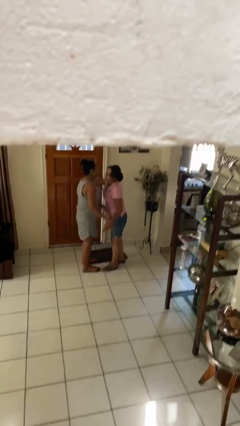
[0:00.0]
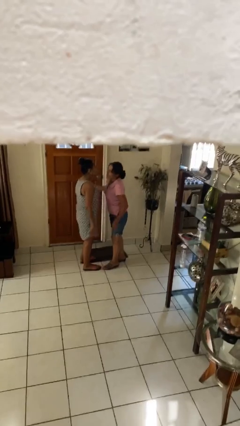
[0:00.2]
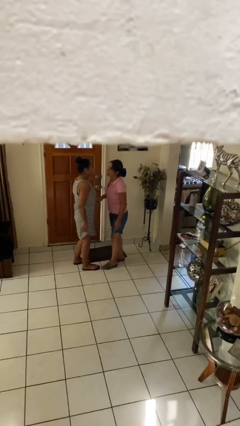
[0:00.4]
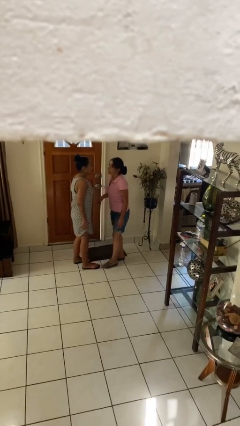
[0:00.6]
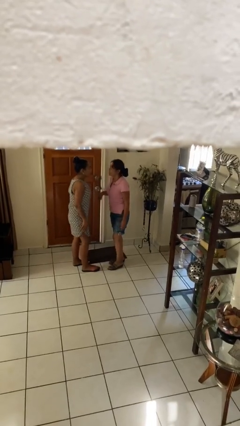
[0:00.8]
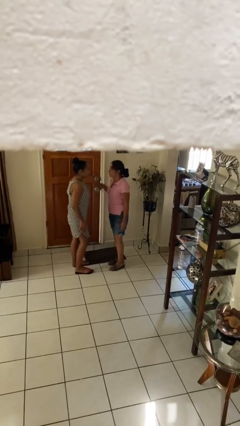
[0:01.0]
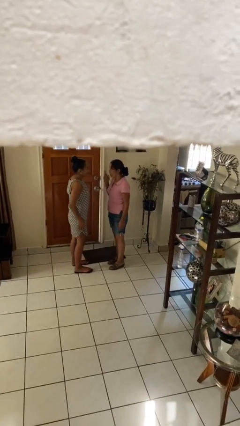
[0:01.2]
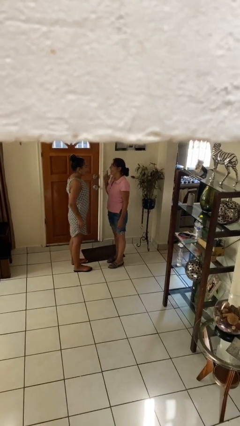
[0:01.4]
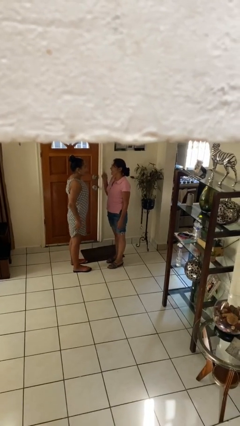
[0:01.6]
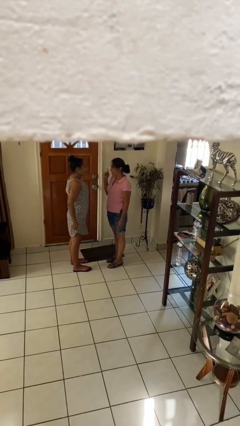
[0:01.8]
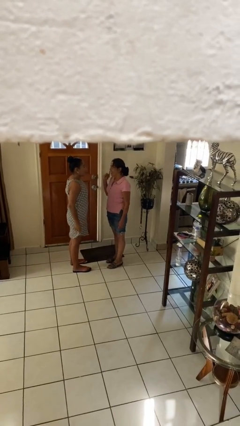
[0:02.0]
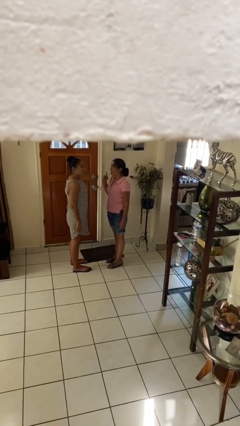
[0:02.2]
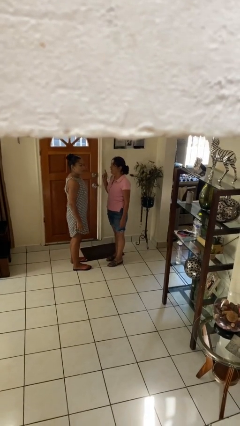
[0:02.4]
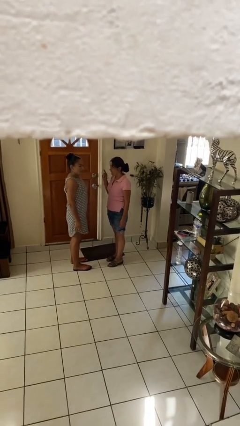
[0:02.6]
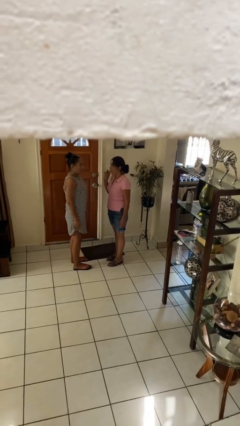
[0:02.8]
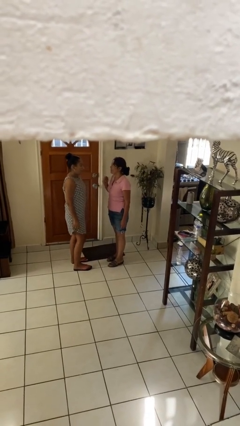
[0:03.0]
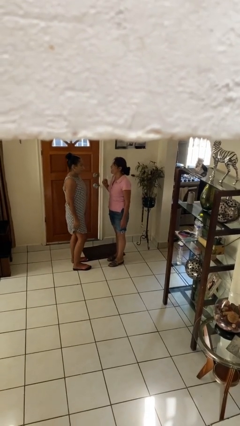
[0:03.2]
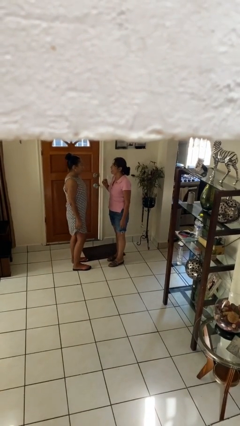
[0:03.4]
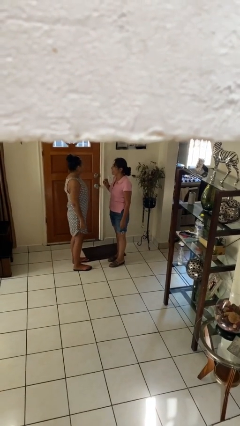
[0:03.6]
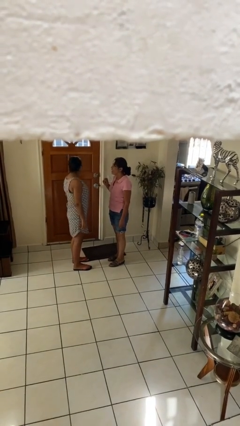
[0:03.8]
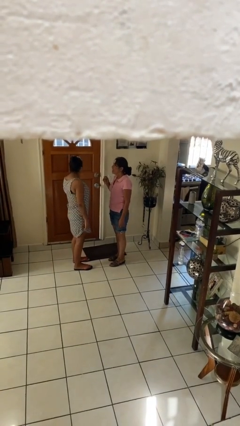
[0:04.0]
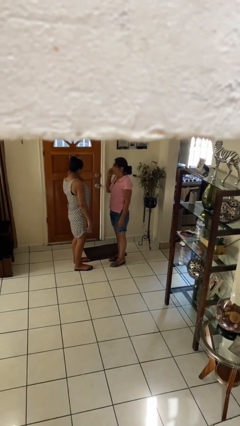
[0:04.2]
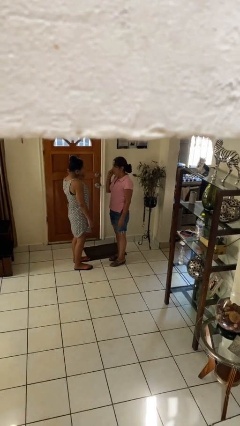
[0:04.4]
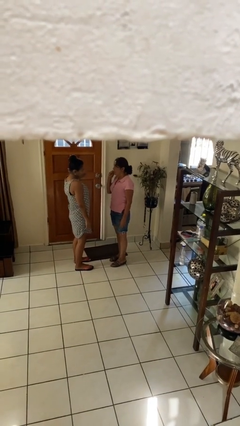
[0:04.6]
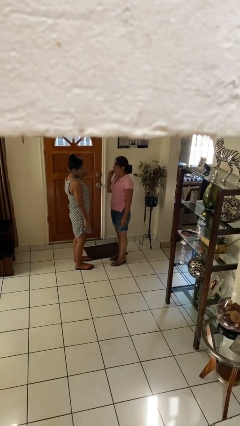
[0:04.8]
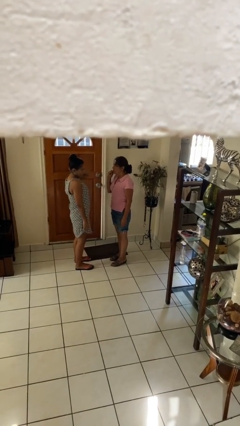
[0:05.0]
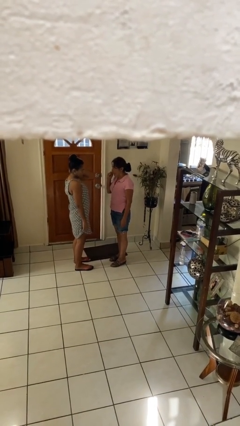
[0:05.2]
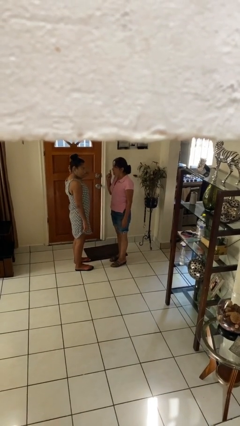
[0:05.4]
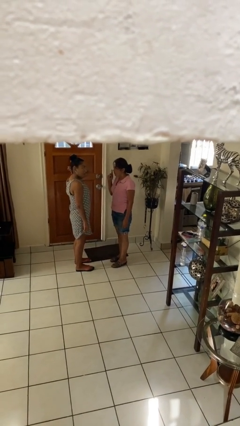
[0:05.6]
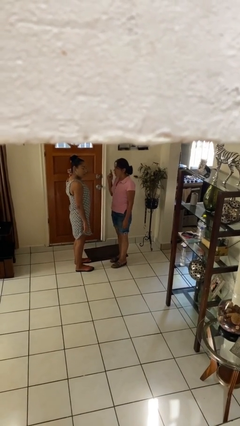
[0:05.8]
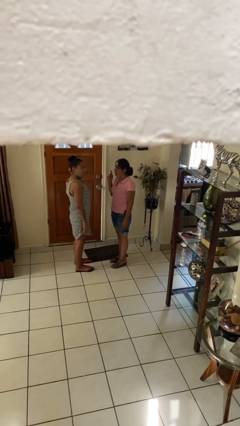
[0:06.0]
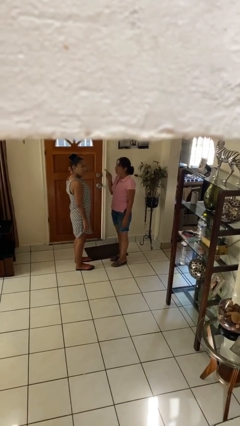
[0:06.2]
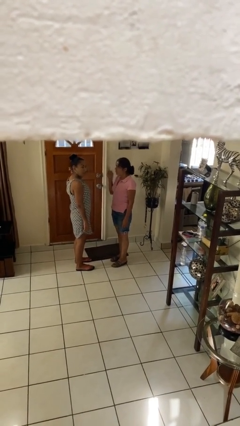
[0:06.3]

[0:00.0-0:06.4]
person talks to person

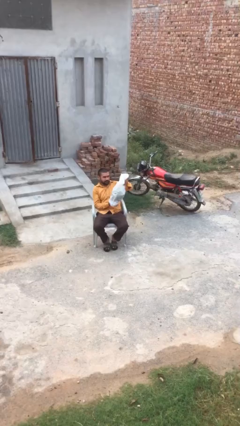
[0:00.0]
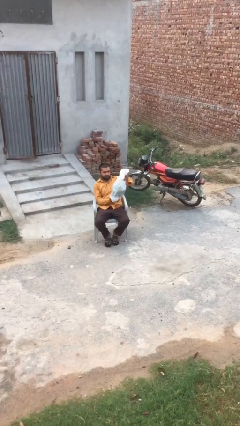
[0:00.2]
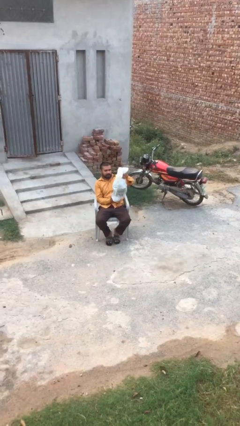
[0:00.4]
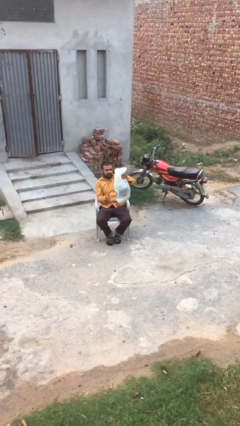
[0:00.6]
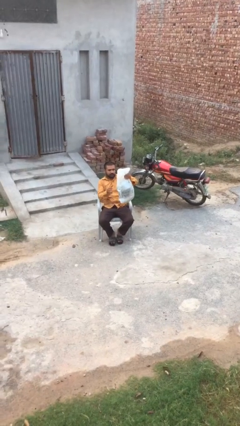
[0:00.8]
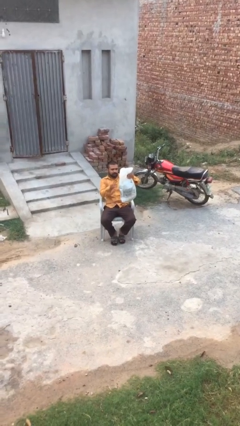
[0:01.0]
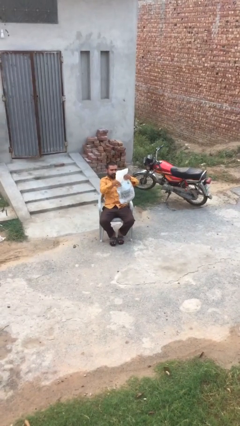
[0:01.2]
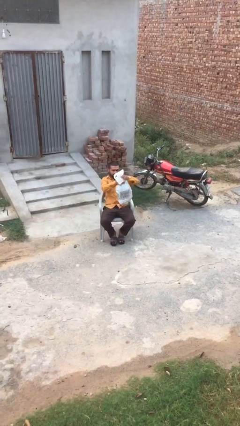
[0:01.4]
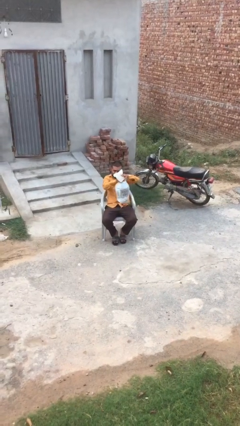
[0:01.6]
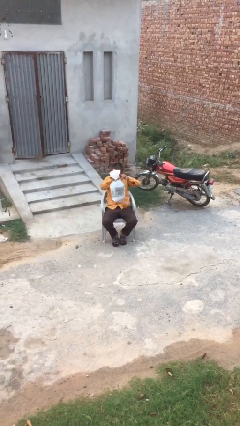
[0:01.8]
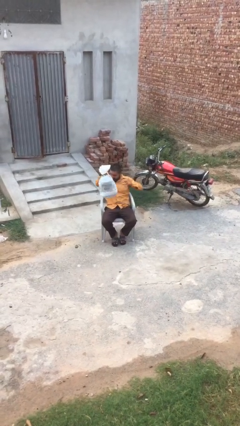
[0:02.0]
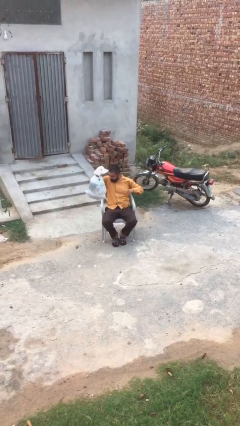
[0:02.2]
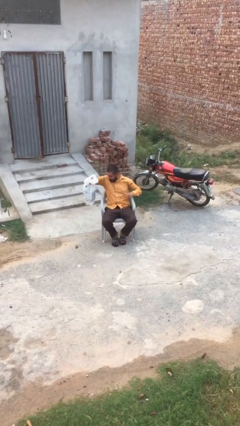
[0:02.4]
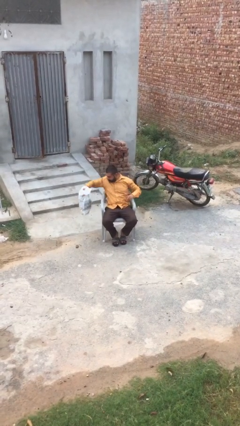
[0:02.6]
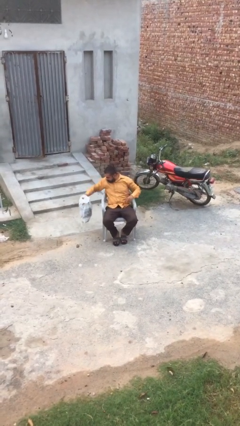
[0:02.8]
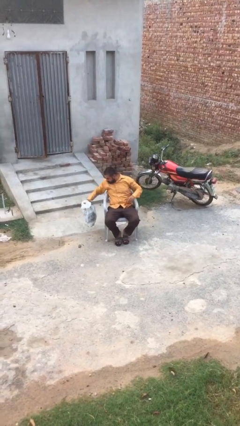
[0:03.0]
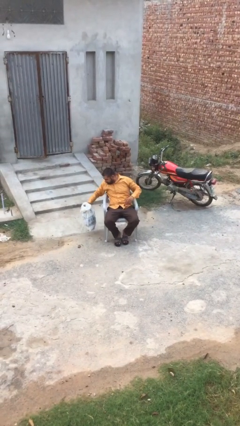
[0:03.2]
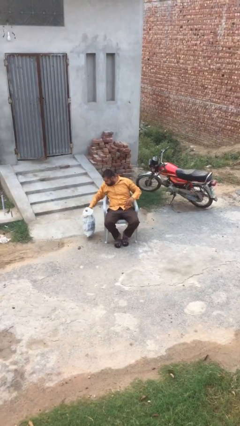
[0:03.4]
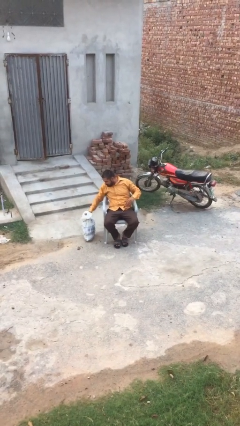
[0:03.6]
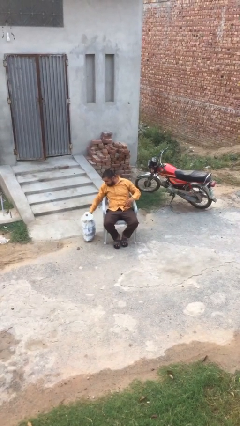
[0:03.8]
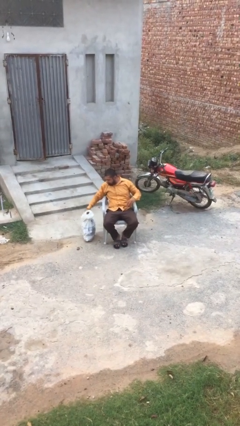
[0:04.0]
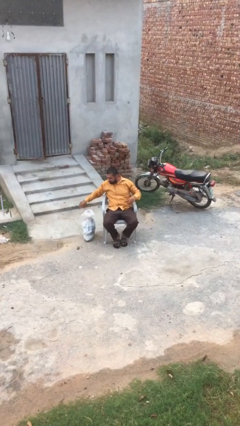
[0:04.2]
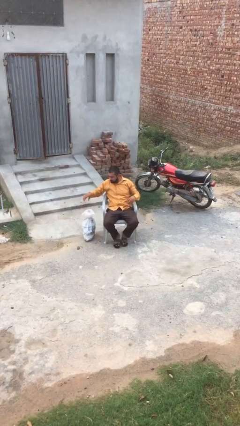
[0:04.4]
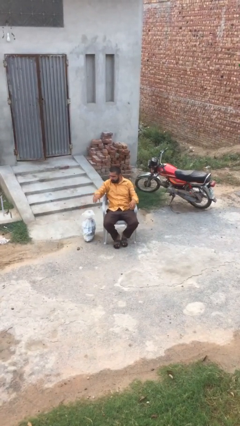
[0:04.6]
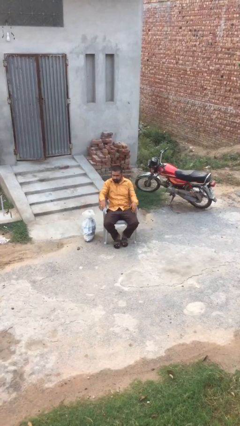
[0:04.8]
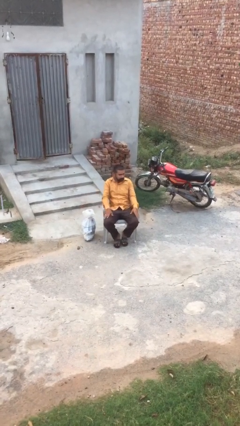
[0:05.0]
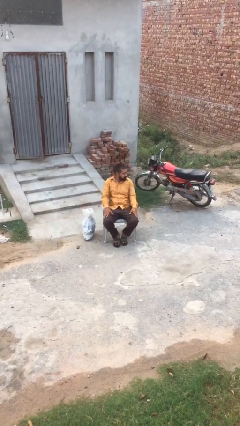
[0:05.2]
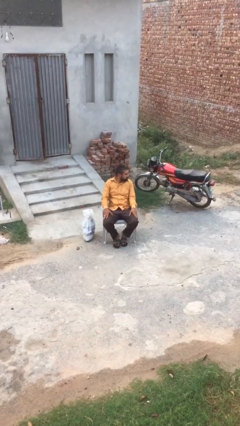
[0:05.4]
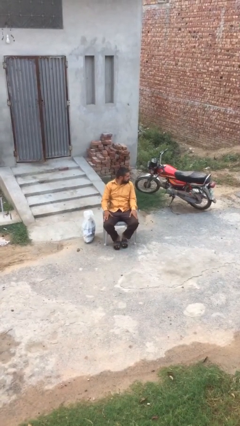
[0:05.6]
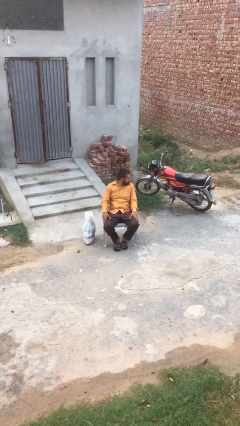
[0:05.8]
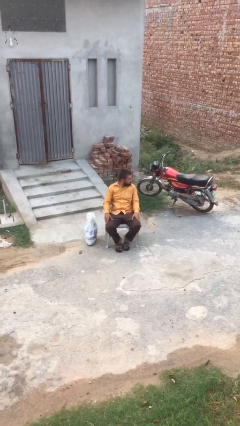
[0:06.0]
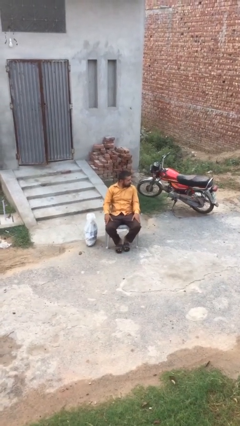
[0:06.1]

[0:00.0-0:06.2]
person puts down object on floor

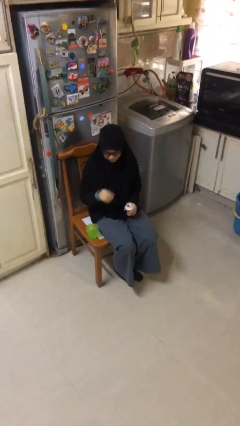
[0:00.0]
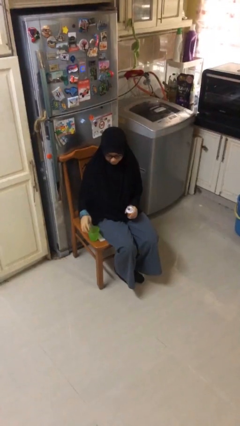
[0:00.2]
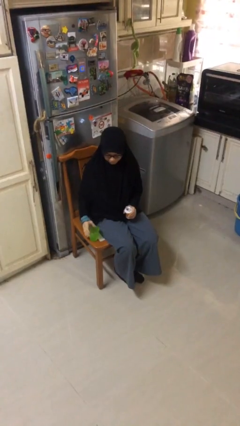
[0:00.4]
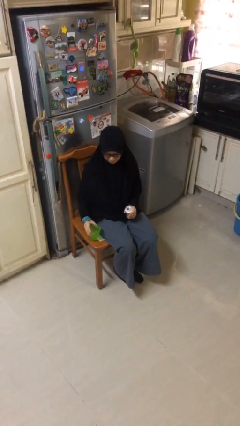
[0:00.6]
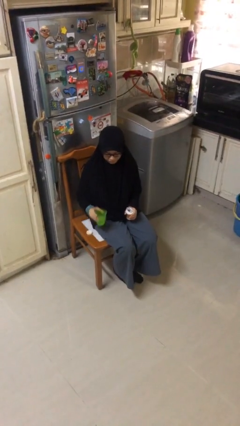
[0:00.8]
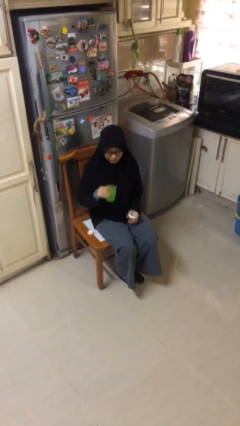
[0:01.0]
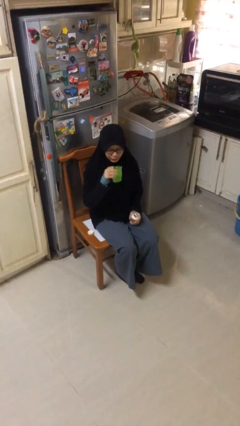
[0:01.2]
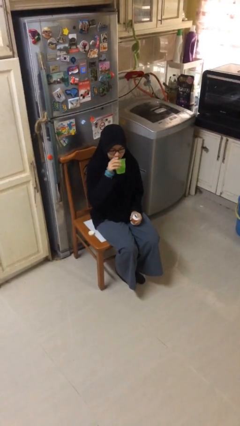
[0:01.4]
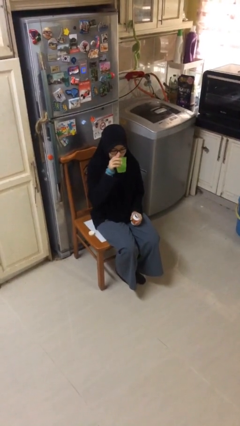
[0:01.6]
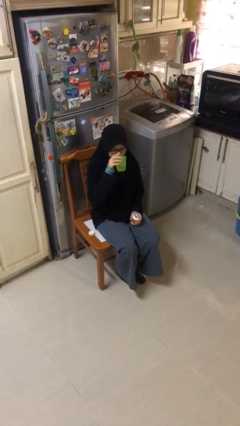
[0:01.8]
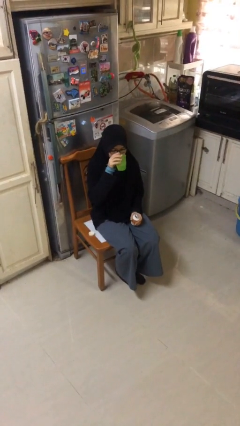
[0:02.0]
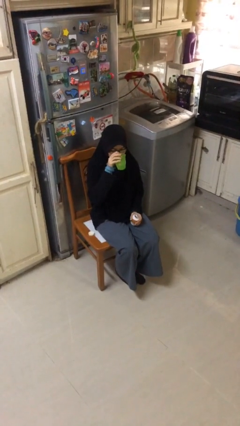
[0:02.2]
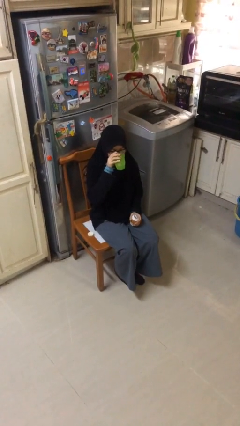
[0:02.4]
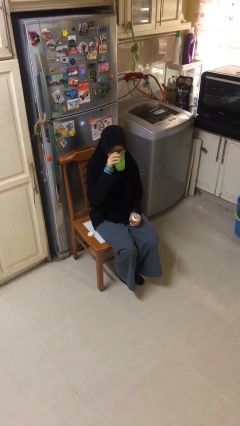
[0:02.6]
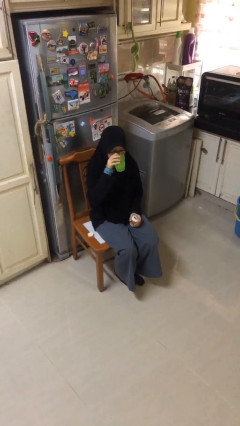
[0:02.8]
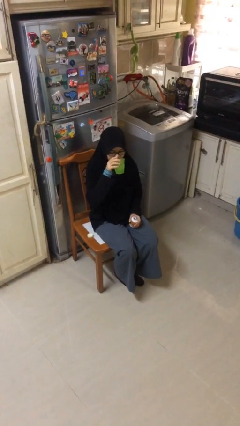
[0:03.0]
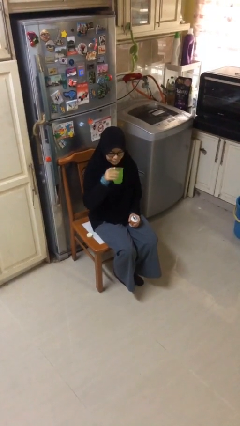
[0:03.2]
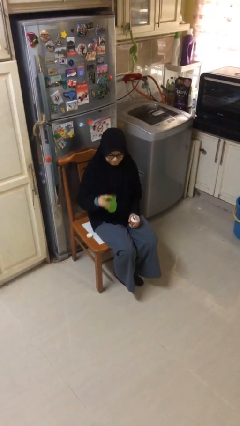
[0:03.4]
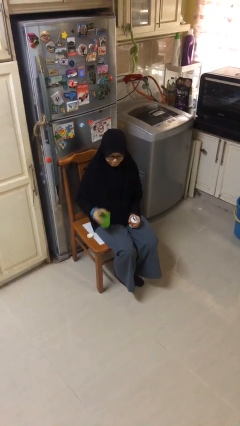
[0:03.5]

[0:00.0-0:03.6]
person drinks from cup

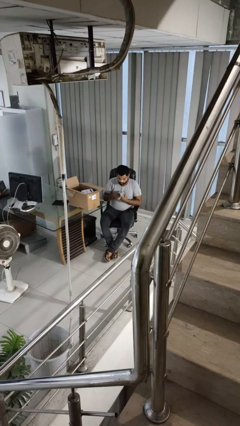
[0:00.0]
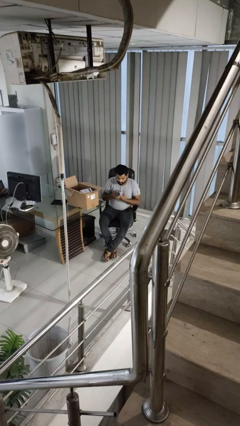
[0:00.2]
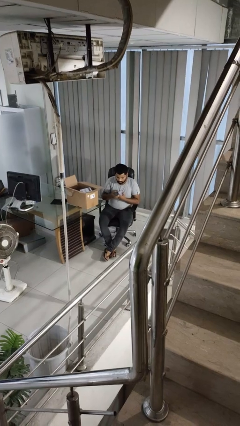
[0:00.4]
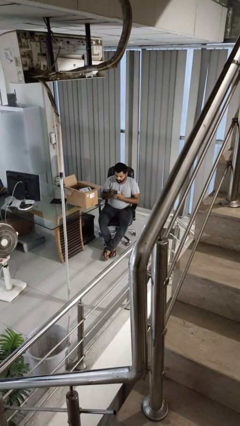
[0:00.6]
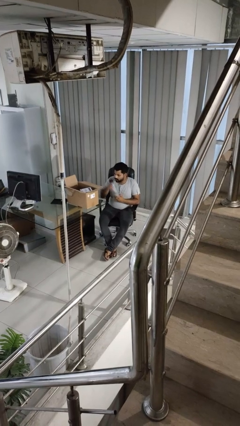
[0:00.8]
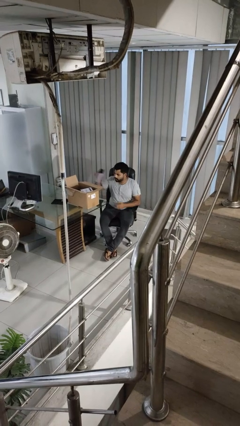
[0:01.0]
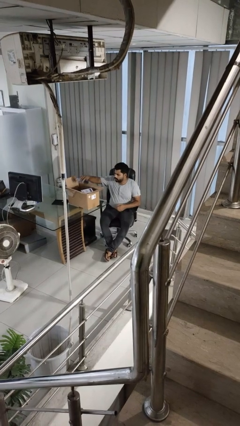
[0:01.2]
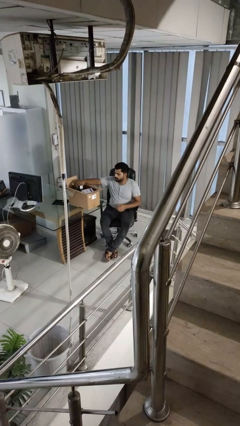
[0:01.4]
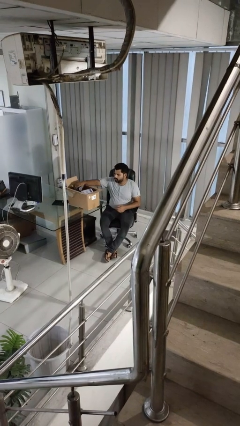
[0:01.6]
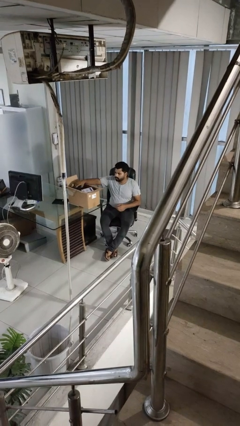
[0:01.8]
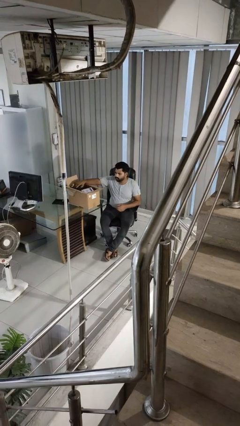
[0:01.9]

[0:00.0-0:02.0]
person puts object into box
